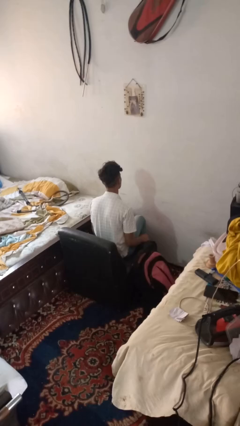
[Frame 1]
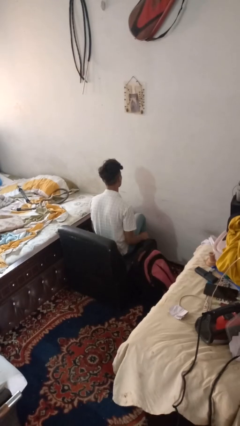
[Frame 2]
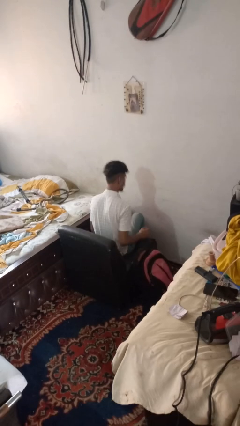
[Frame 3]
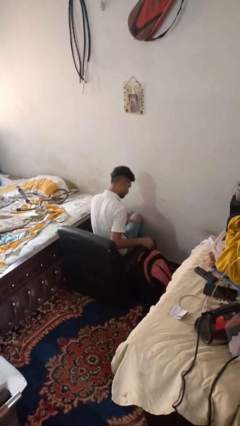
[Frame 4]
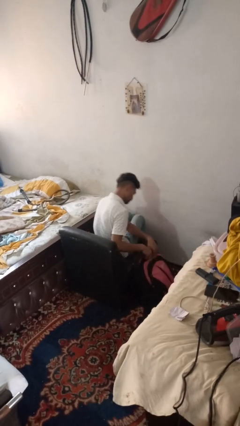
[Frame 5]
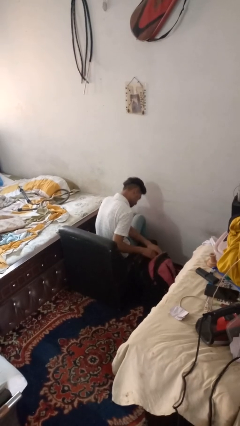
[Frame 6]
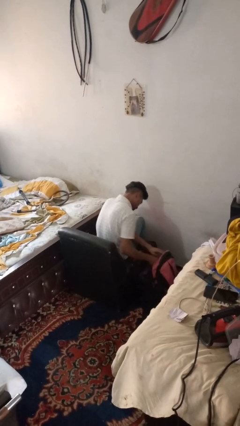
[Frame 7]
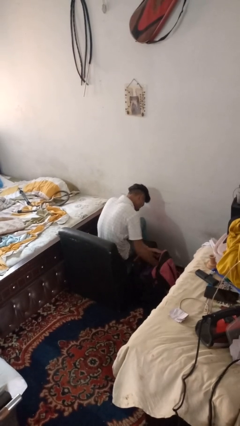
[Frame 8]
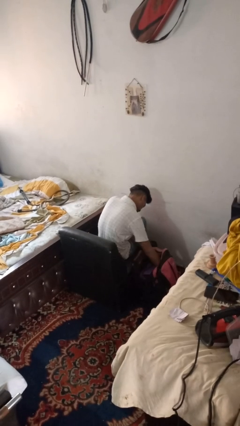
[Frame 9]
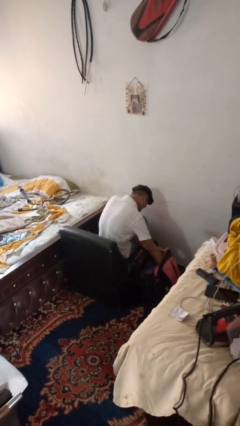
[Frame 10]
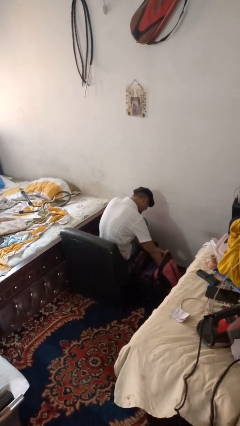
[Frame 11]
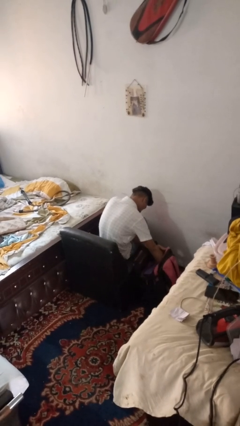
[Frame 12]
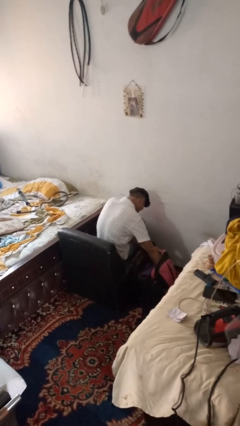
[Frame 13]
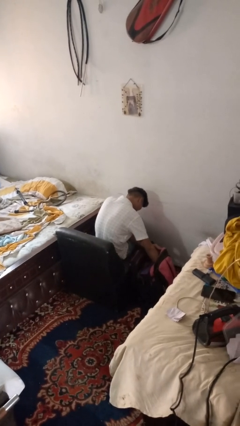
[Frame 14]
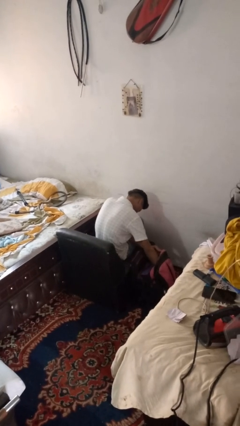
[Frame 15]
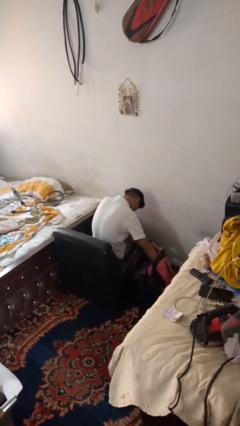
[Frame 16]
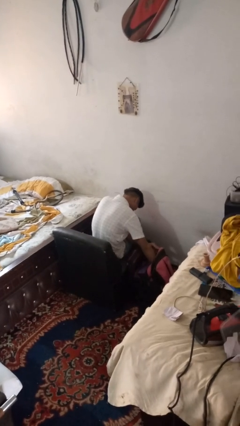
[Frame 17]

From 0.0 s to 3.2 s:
person searches in bag

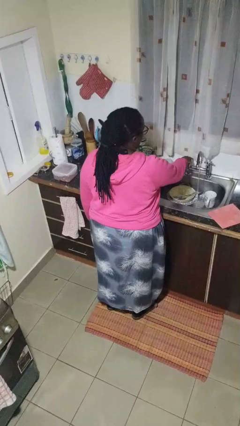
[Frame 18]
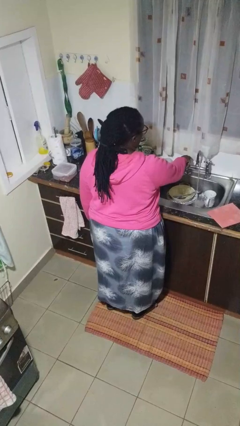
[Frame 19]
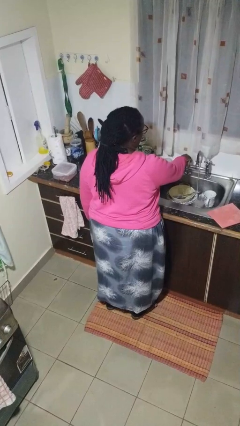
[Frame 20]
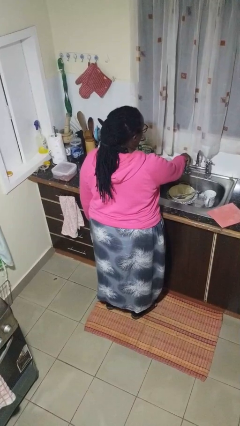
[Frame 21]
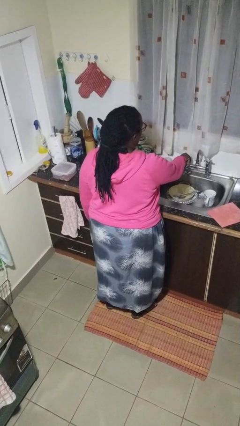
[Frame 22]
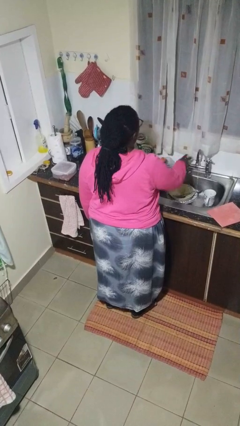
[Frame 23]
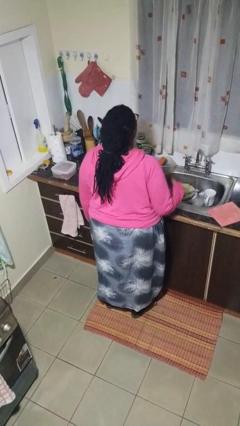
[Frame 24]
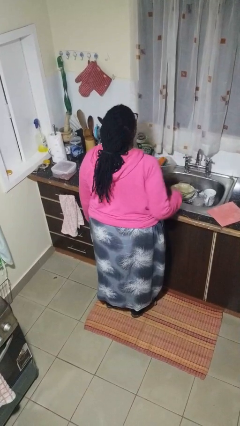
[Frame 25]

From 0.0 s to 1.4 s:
person turns off faucet

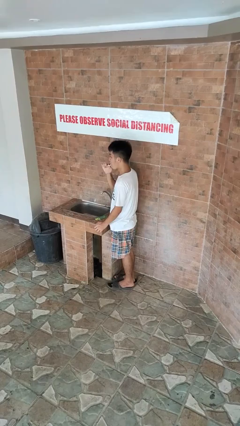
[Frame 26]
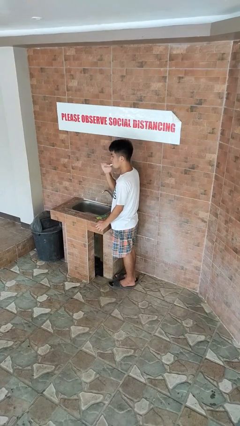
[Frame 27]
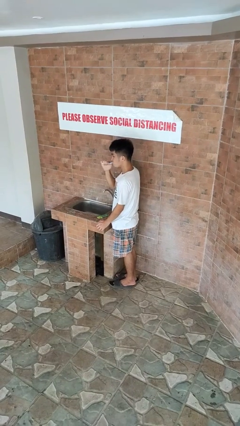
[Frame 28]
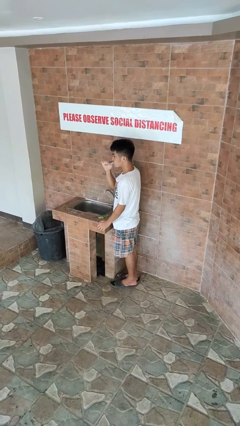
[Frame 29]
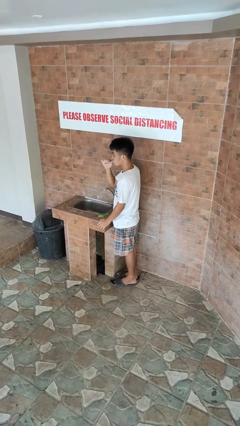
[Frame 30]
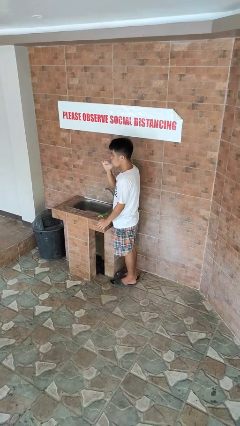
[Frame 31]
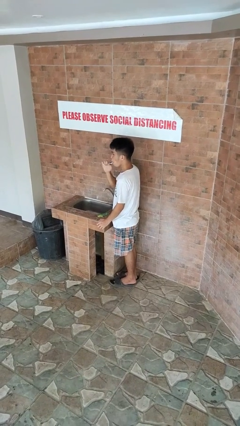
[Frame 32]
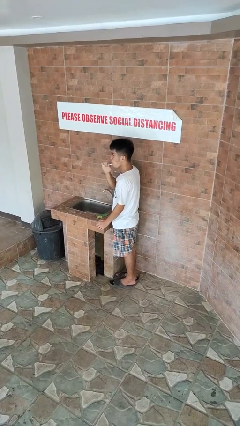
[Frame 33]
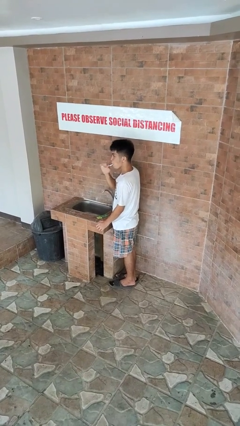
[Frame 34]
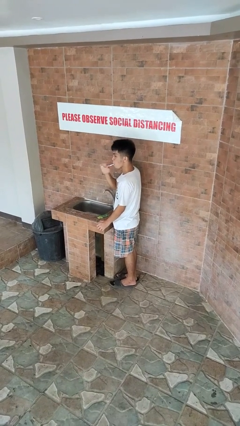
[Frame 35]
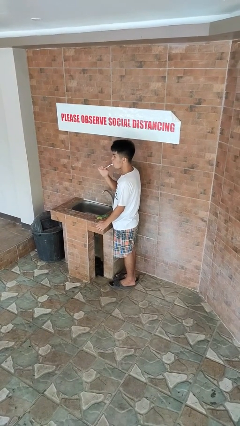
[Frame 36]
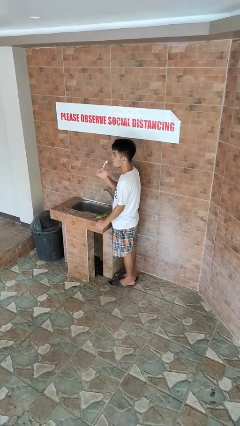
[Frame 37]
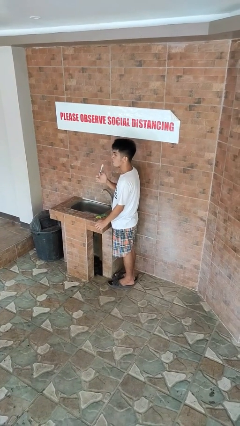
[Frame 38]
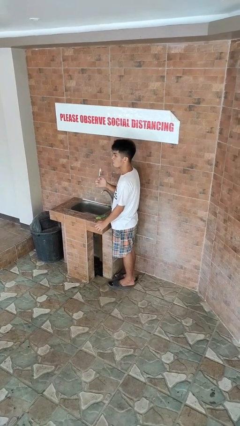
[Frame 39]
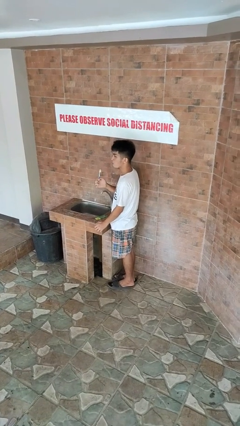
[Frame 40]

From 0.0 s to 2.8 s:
person brushes teeth

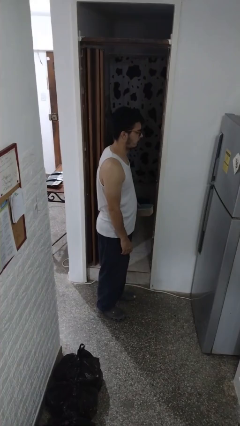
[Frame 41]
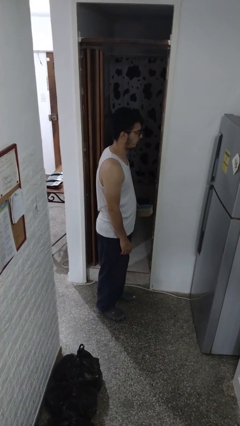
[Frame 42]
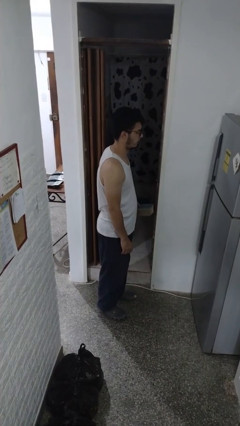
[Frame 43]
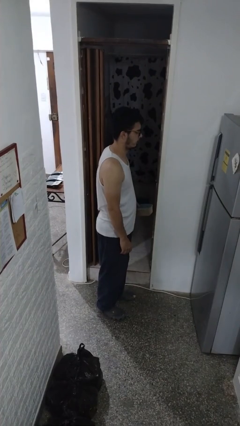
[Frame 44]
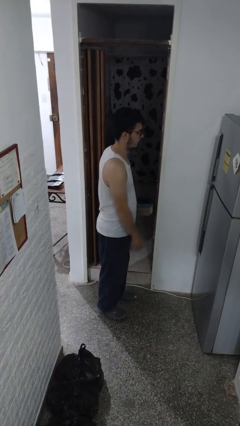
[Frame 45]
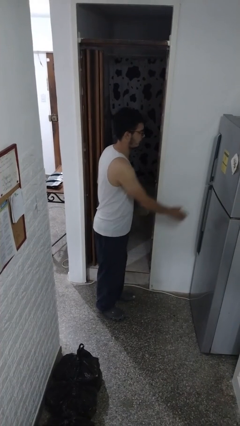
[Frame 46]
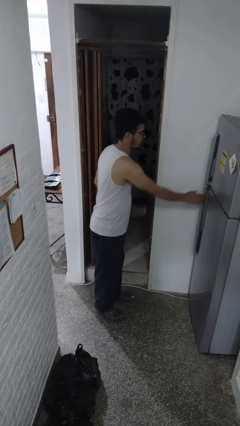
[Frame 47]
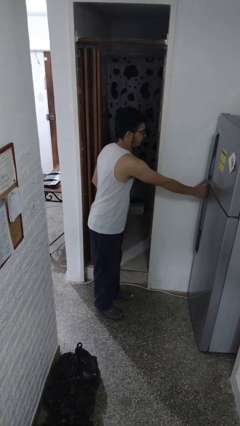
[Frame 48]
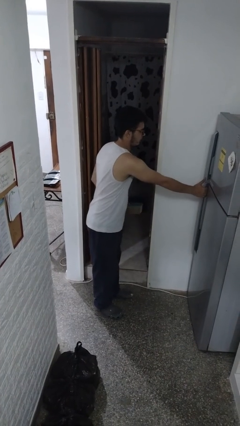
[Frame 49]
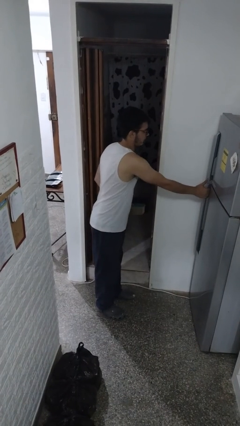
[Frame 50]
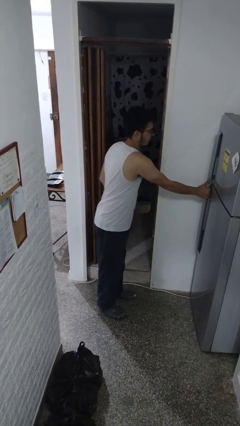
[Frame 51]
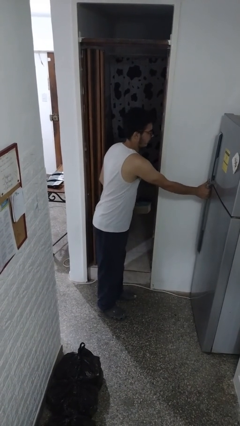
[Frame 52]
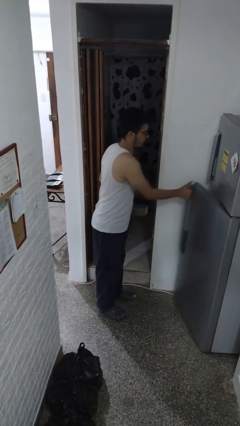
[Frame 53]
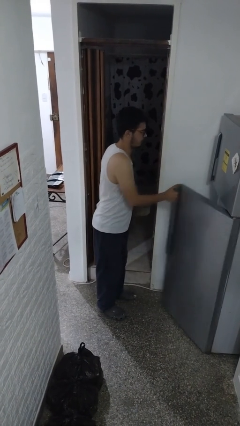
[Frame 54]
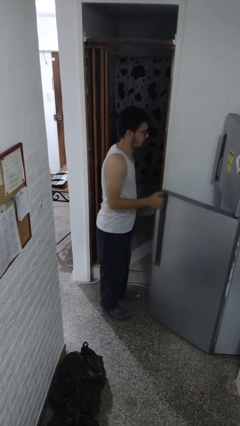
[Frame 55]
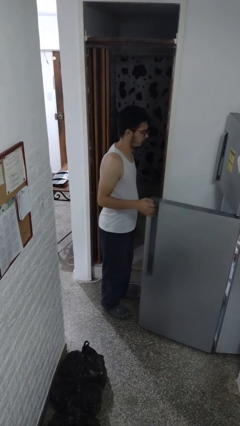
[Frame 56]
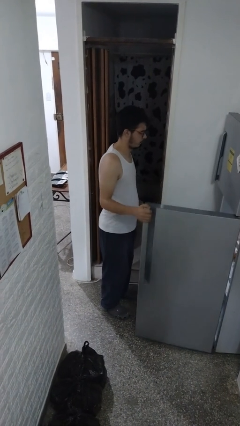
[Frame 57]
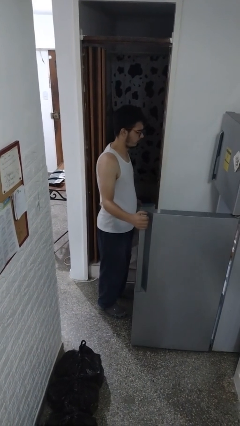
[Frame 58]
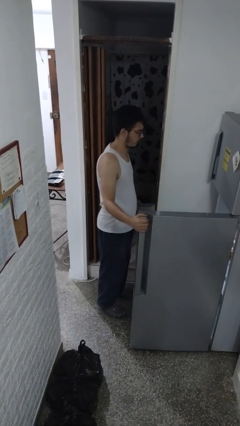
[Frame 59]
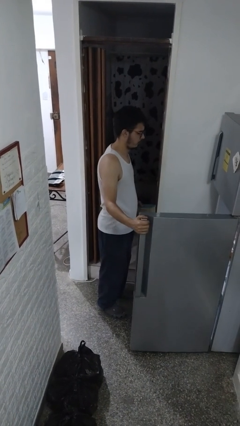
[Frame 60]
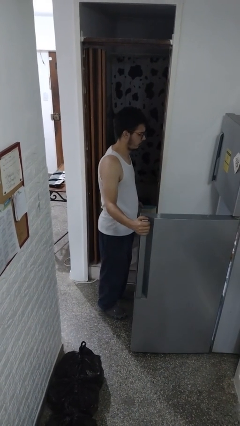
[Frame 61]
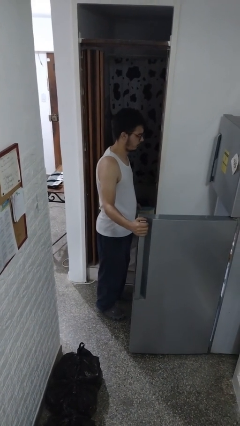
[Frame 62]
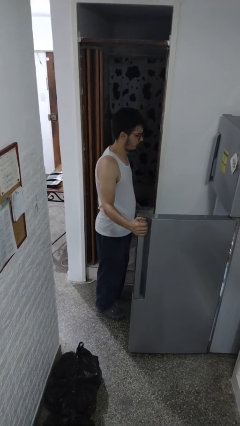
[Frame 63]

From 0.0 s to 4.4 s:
person opens refrigerator

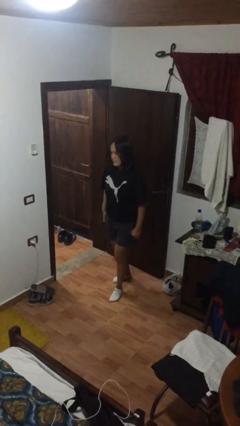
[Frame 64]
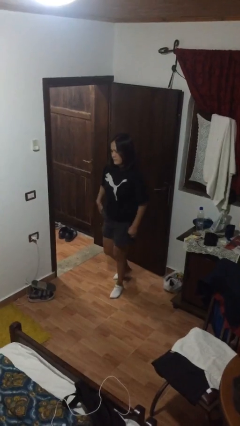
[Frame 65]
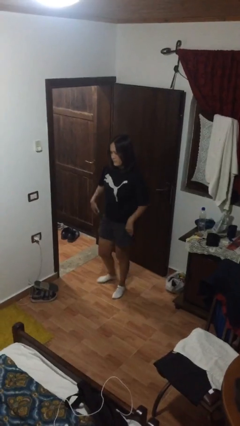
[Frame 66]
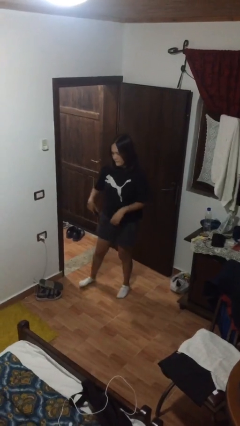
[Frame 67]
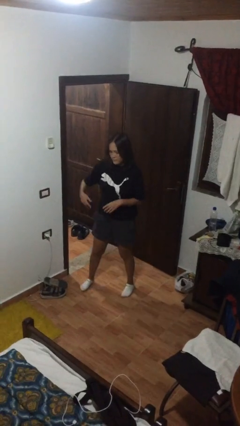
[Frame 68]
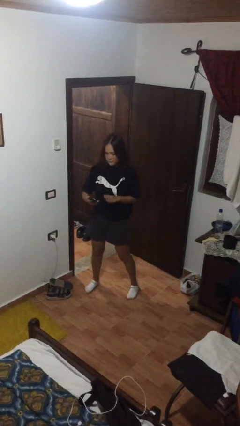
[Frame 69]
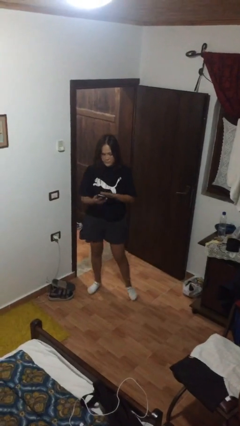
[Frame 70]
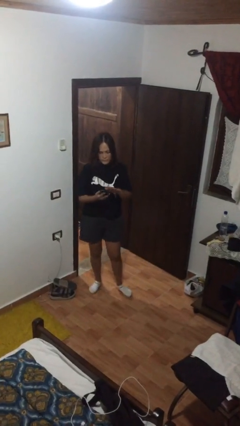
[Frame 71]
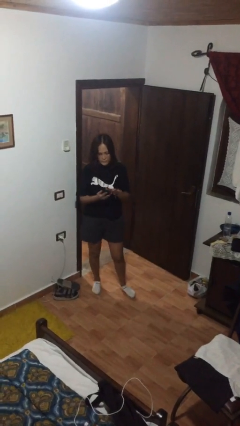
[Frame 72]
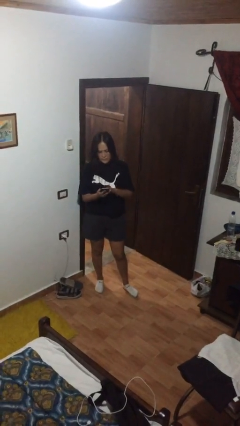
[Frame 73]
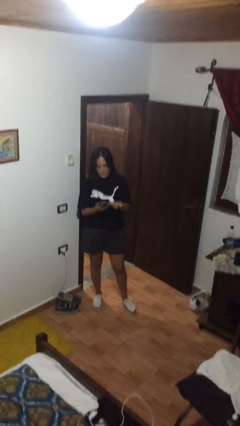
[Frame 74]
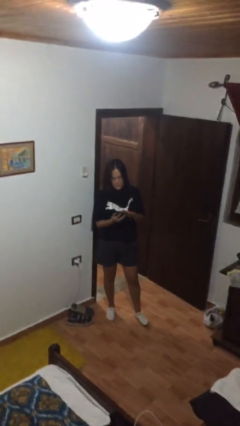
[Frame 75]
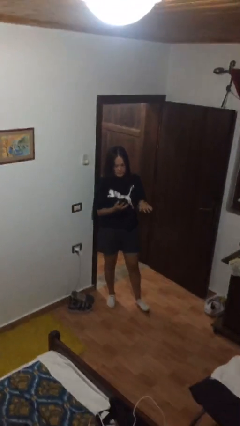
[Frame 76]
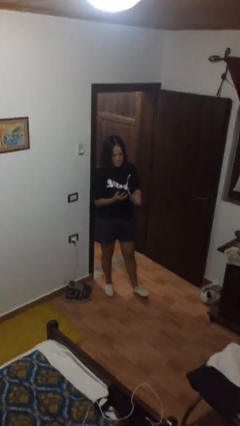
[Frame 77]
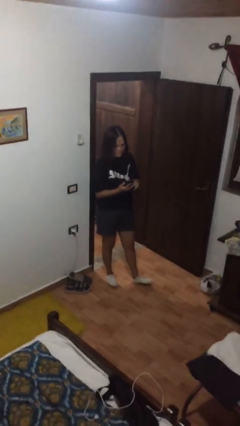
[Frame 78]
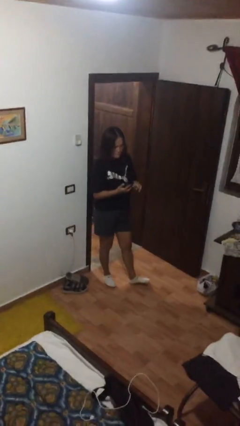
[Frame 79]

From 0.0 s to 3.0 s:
person takes phone from pocket

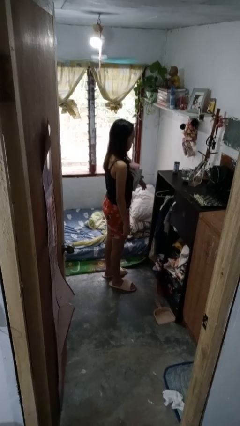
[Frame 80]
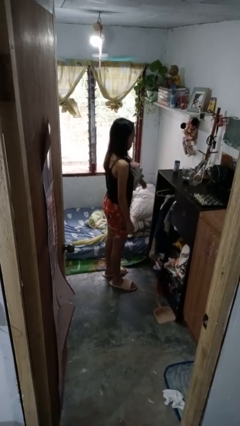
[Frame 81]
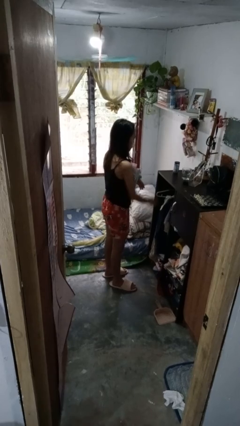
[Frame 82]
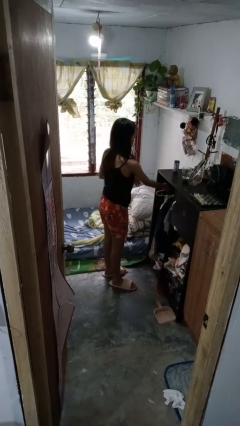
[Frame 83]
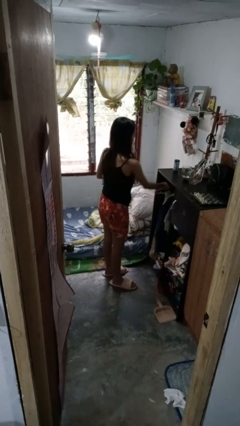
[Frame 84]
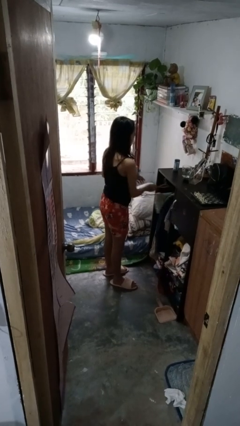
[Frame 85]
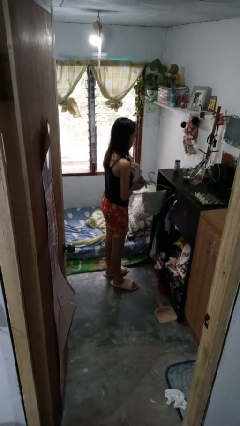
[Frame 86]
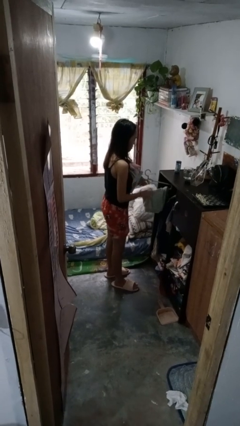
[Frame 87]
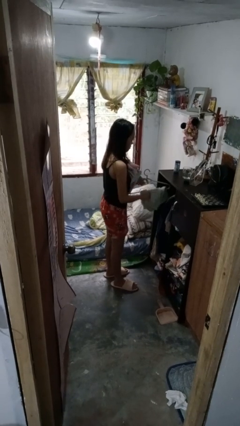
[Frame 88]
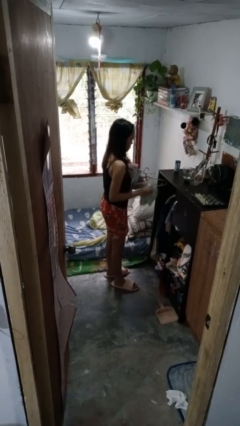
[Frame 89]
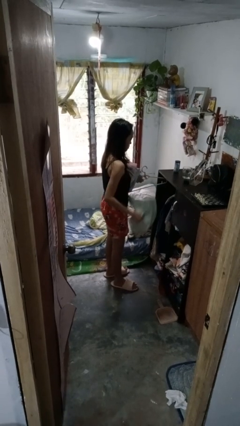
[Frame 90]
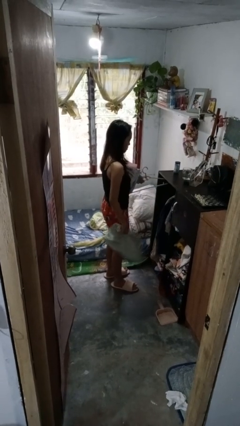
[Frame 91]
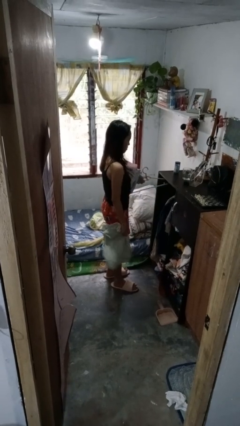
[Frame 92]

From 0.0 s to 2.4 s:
person takes clothes from closet
